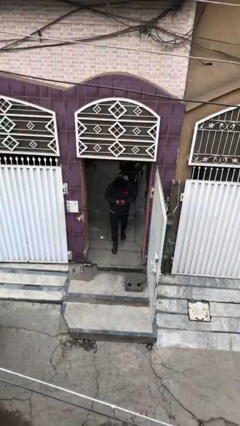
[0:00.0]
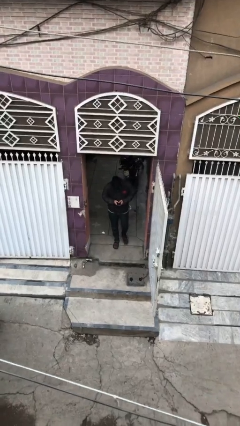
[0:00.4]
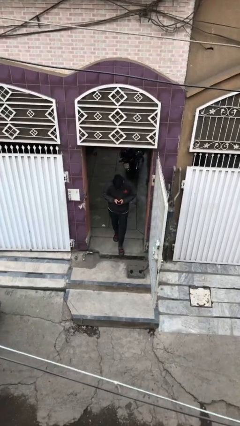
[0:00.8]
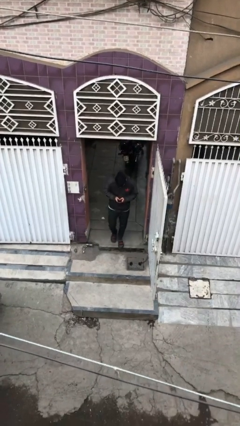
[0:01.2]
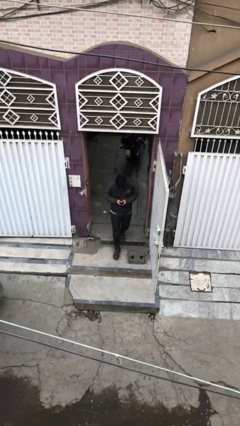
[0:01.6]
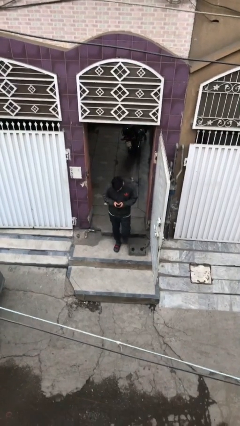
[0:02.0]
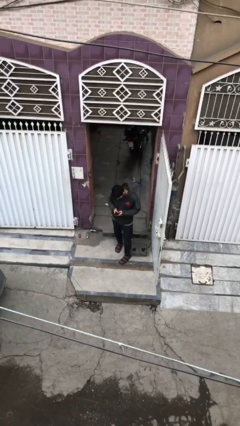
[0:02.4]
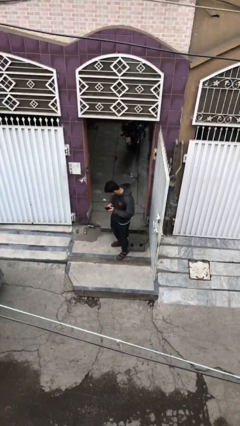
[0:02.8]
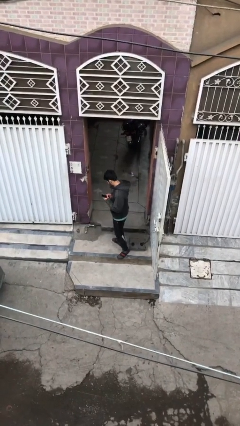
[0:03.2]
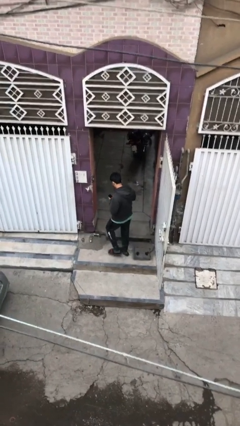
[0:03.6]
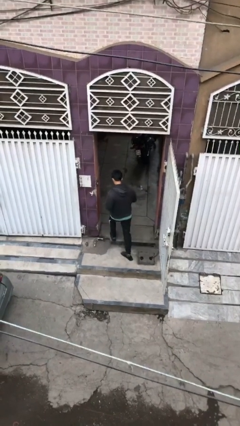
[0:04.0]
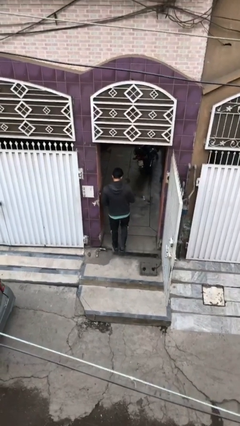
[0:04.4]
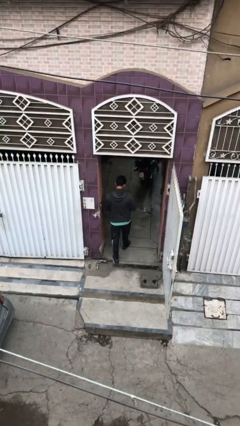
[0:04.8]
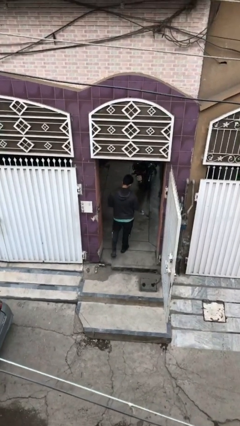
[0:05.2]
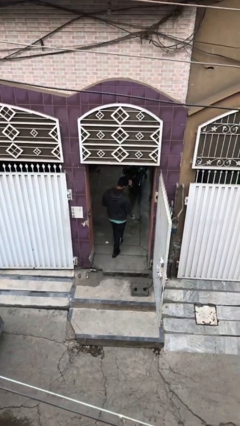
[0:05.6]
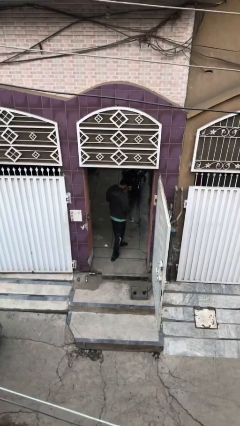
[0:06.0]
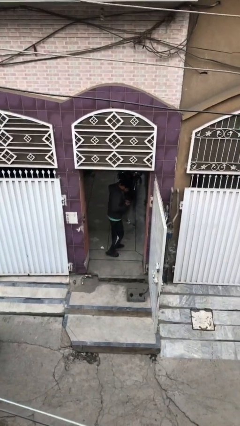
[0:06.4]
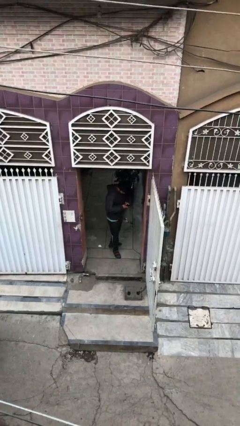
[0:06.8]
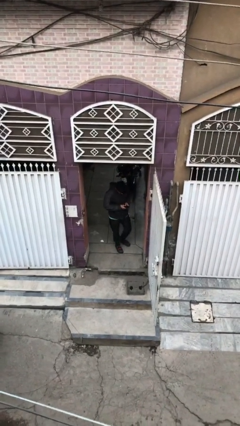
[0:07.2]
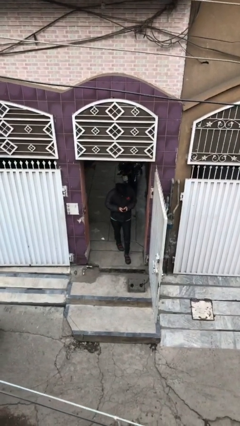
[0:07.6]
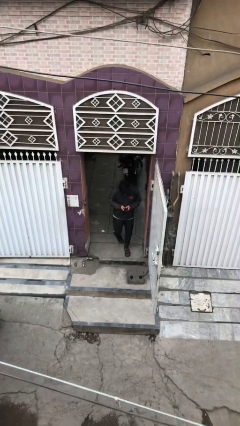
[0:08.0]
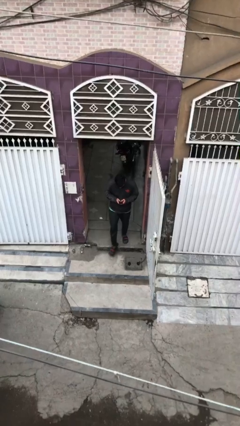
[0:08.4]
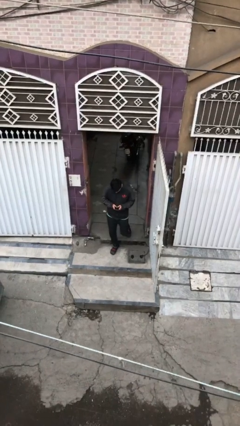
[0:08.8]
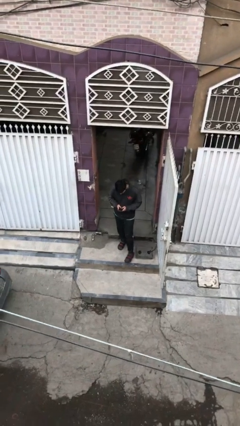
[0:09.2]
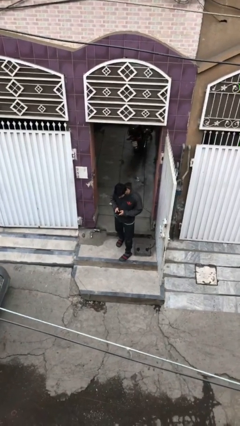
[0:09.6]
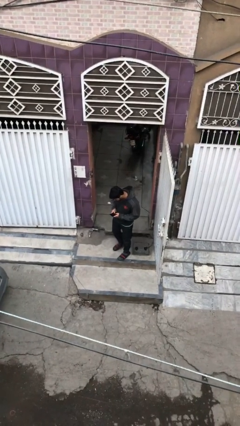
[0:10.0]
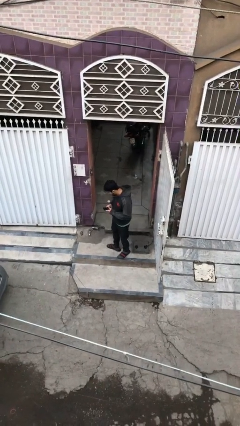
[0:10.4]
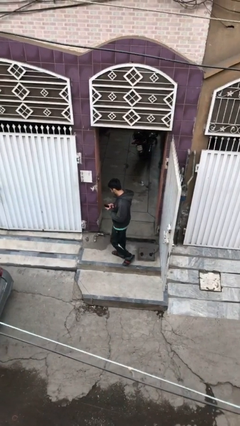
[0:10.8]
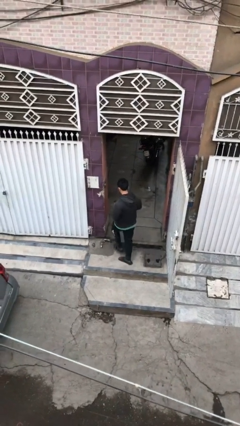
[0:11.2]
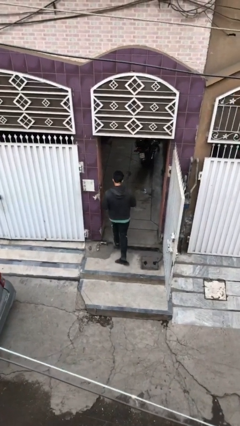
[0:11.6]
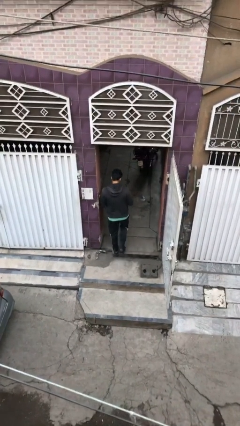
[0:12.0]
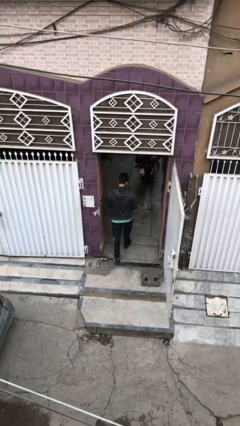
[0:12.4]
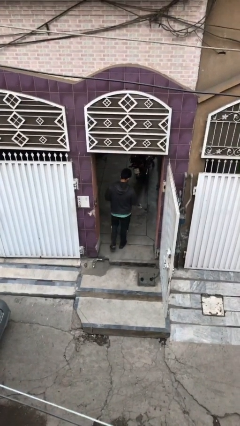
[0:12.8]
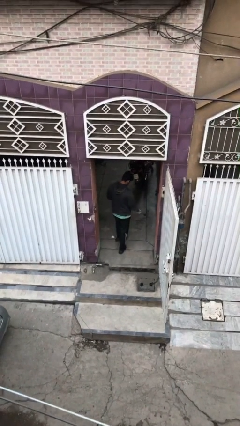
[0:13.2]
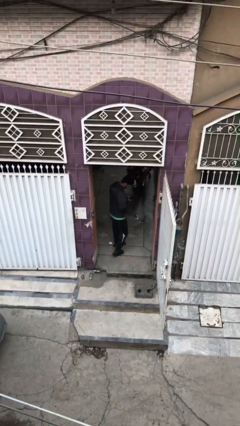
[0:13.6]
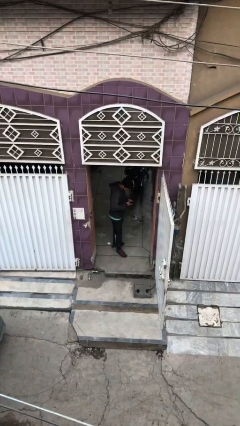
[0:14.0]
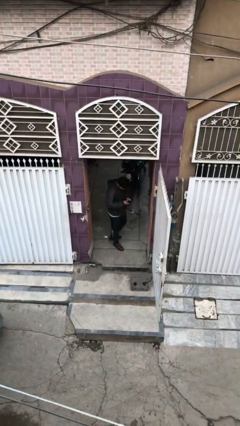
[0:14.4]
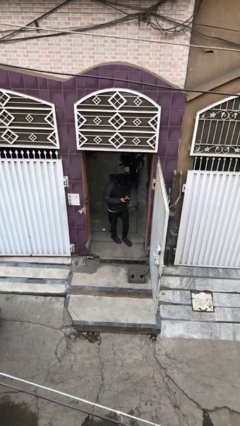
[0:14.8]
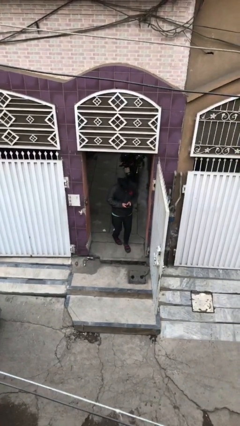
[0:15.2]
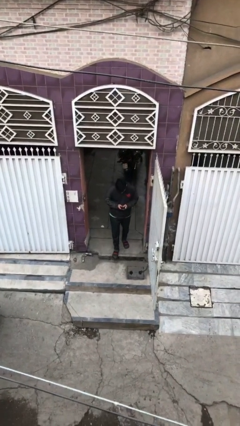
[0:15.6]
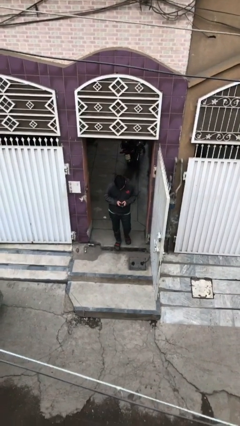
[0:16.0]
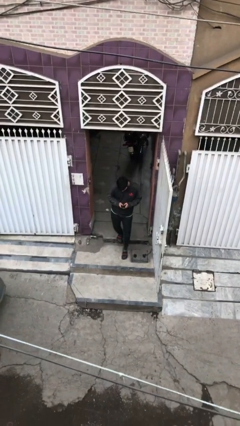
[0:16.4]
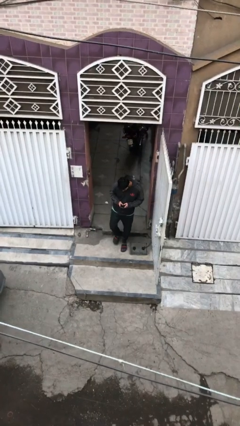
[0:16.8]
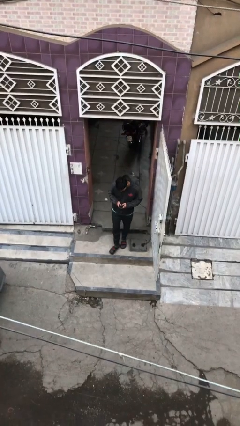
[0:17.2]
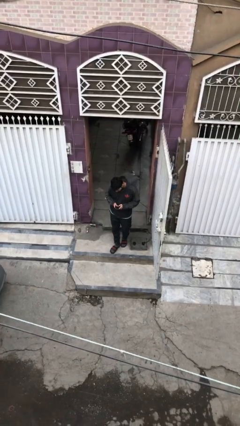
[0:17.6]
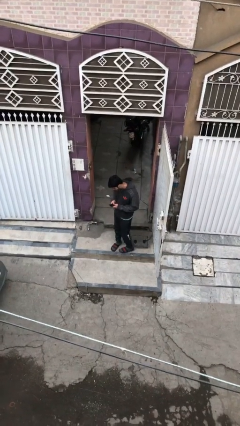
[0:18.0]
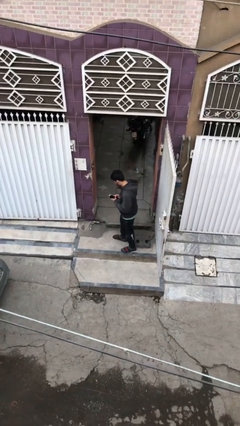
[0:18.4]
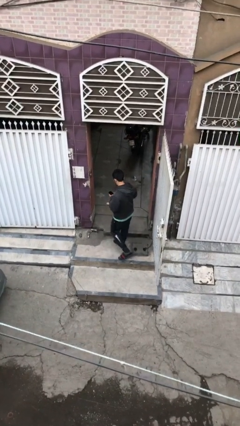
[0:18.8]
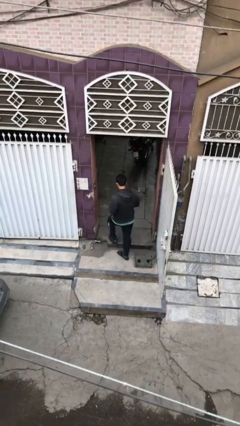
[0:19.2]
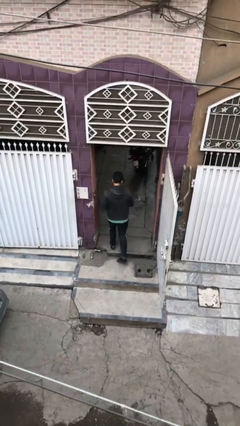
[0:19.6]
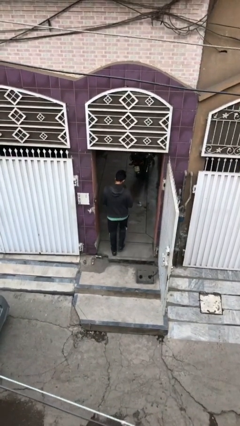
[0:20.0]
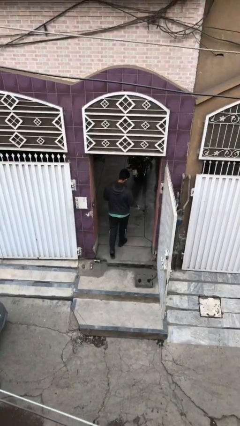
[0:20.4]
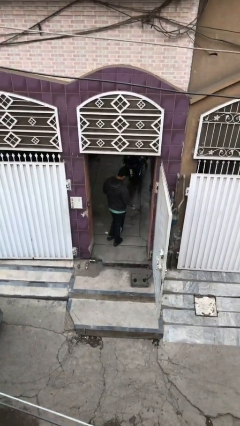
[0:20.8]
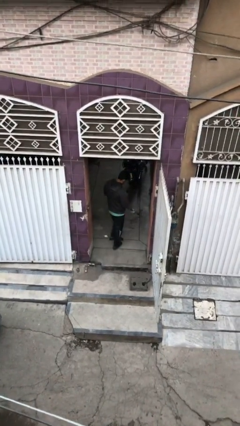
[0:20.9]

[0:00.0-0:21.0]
person texts on phone

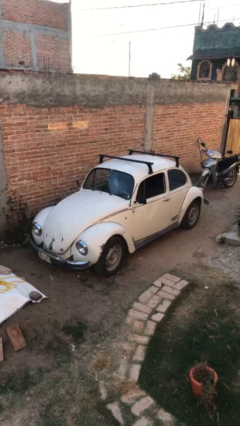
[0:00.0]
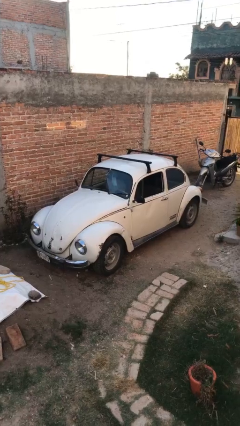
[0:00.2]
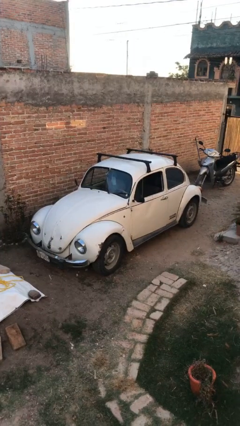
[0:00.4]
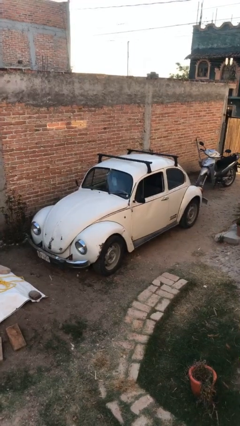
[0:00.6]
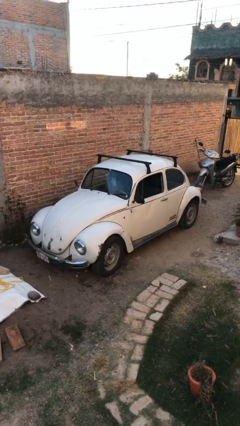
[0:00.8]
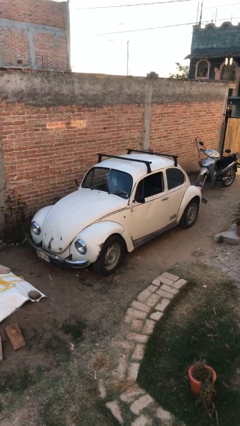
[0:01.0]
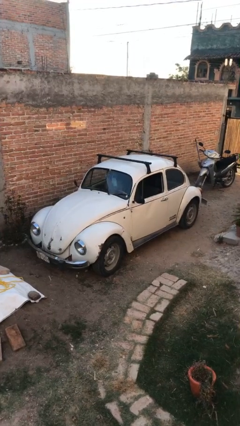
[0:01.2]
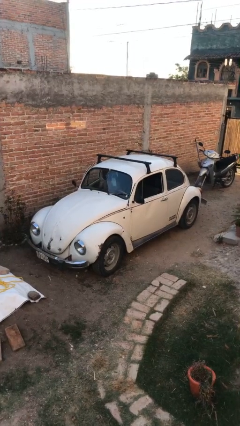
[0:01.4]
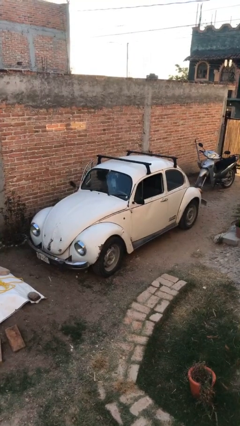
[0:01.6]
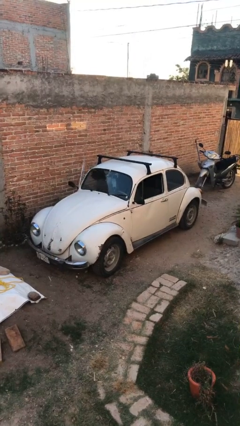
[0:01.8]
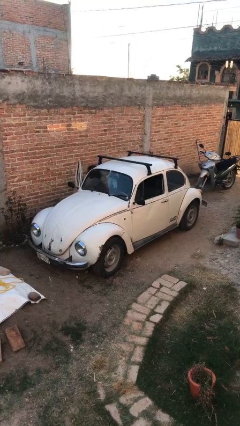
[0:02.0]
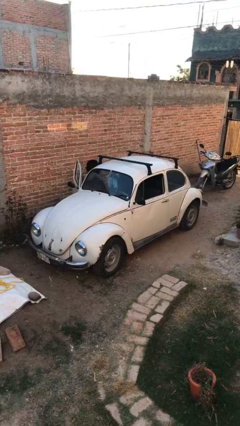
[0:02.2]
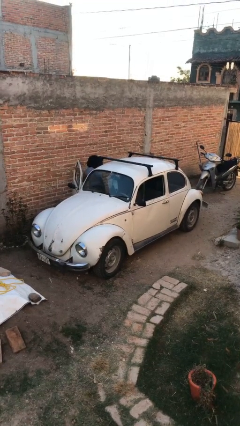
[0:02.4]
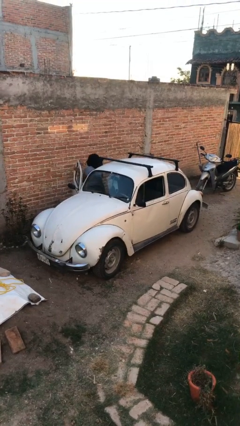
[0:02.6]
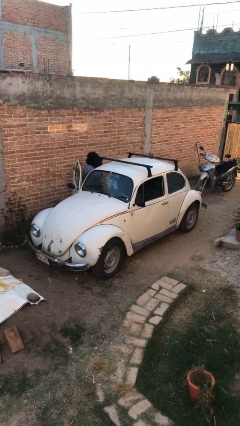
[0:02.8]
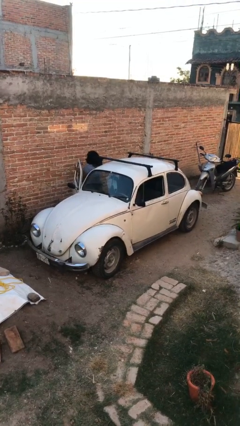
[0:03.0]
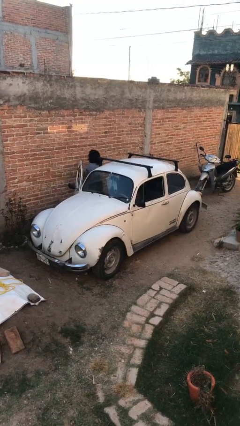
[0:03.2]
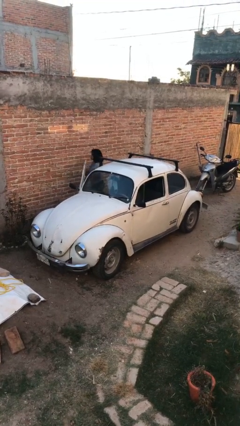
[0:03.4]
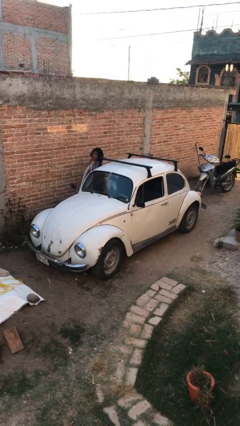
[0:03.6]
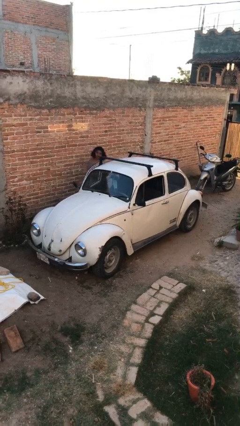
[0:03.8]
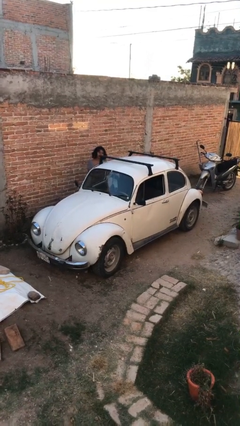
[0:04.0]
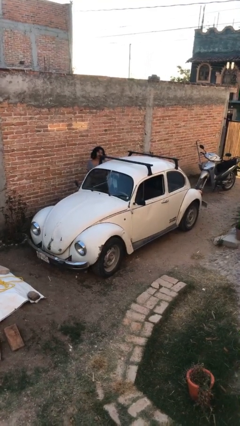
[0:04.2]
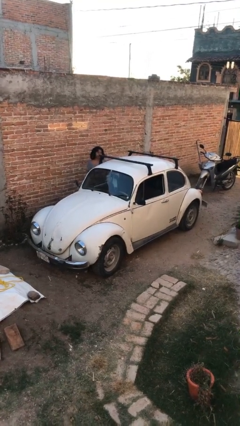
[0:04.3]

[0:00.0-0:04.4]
car drops off person

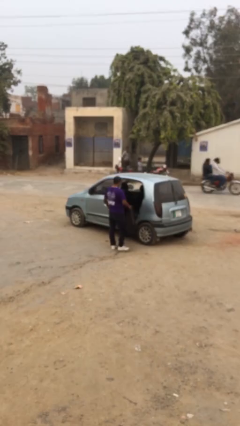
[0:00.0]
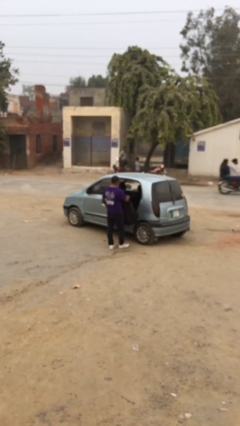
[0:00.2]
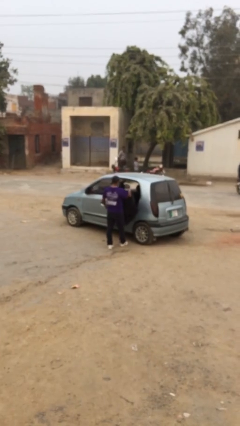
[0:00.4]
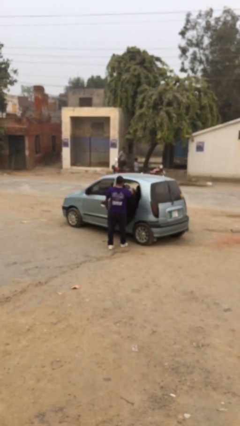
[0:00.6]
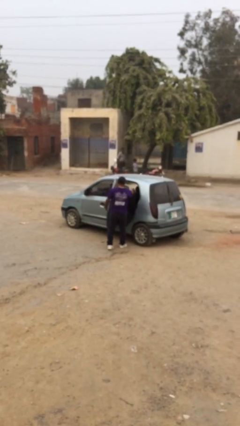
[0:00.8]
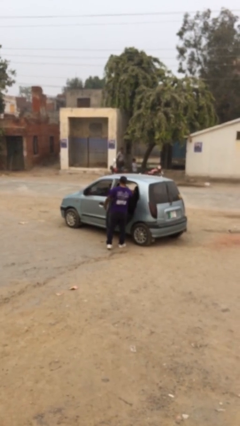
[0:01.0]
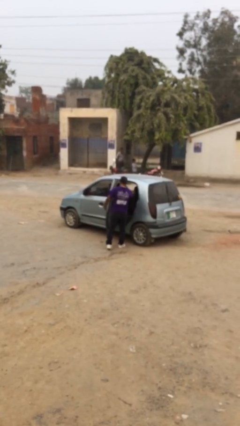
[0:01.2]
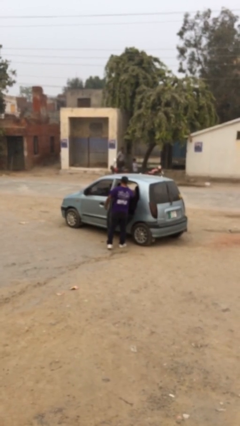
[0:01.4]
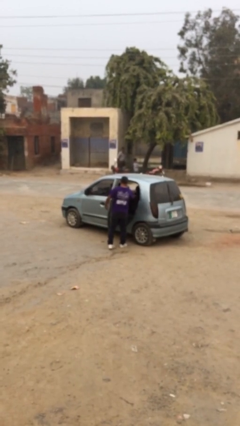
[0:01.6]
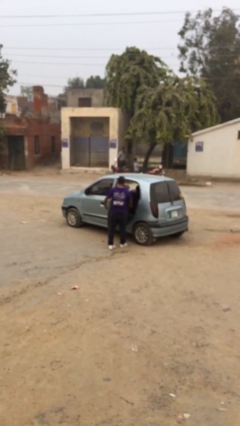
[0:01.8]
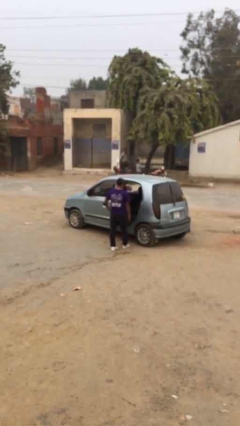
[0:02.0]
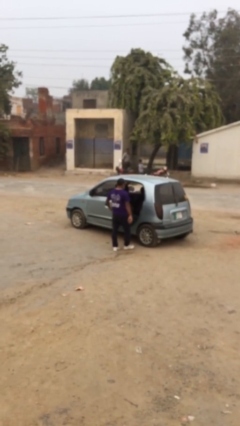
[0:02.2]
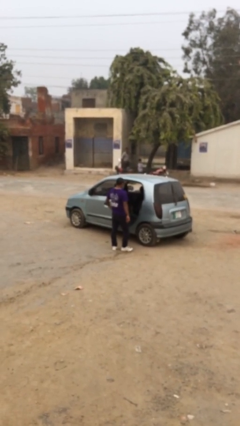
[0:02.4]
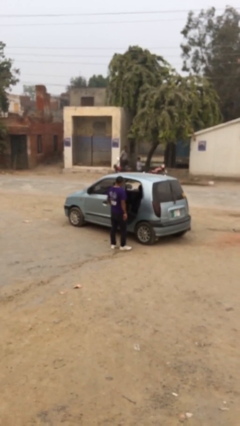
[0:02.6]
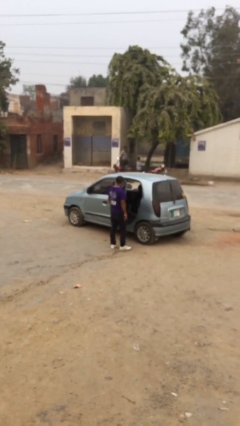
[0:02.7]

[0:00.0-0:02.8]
person loads car
